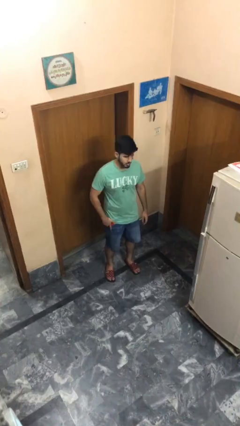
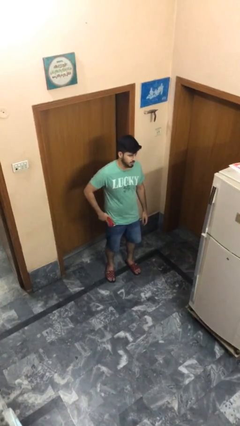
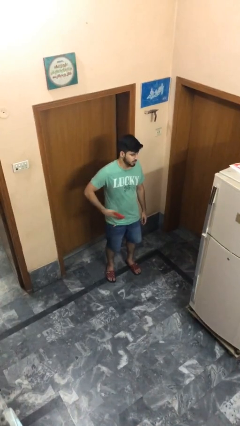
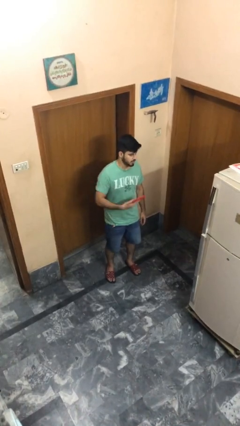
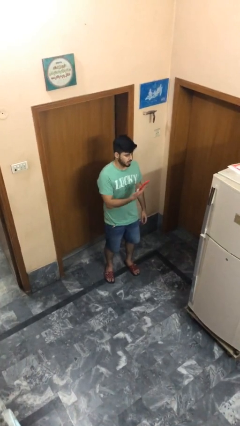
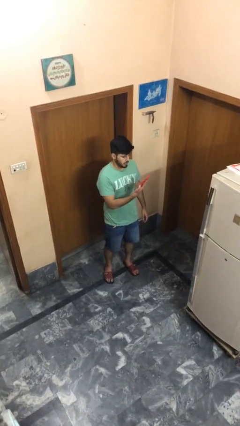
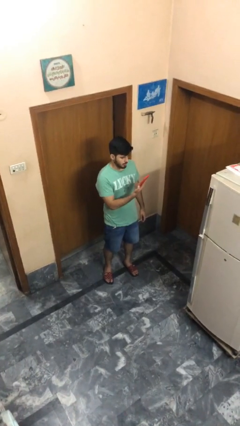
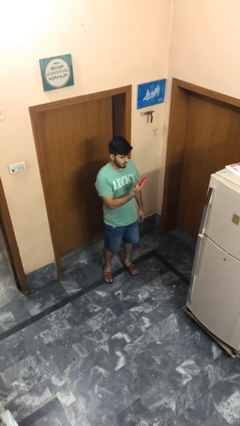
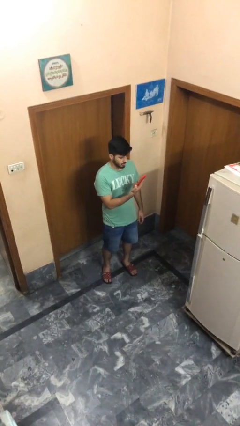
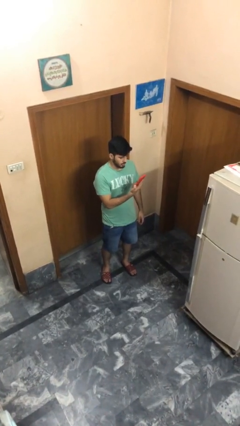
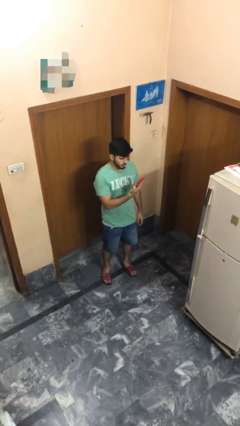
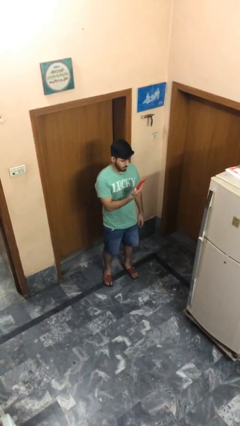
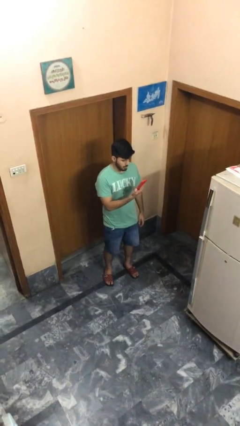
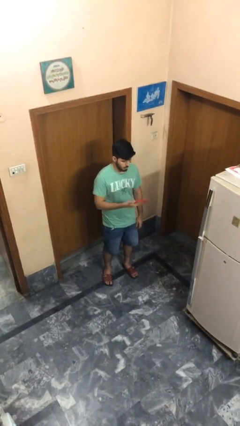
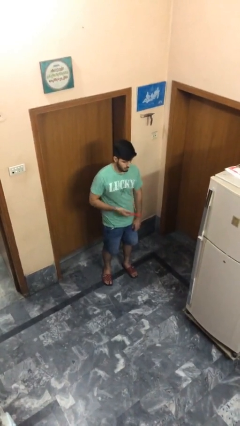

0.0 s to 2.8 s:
person takes phone from pocket

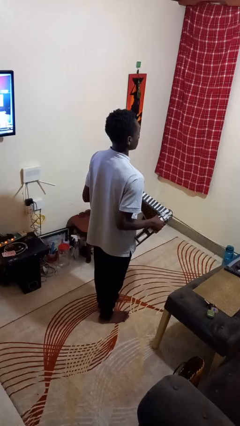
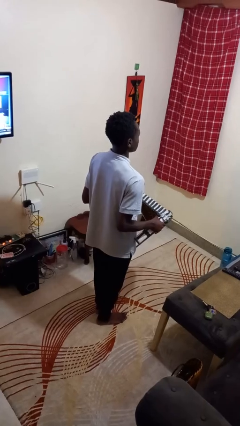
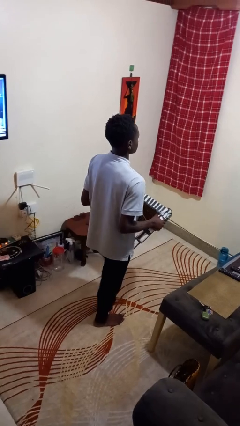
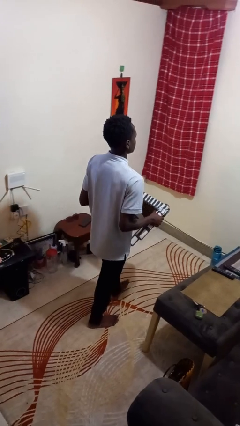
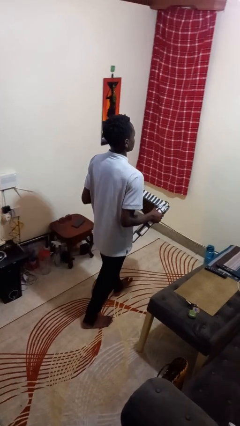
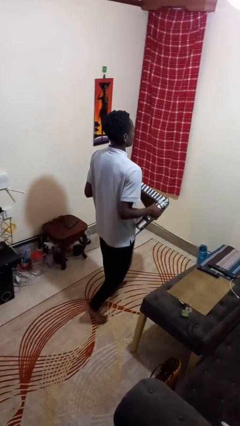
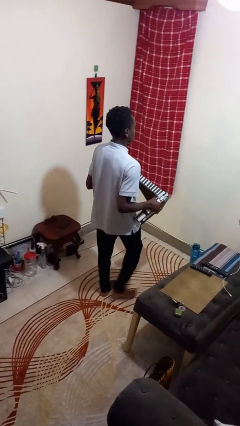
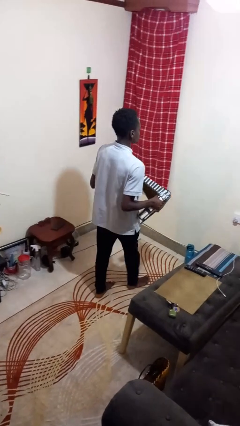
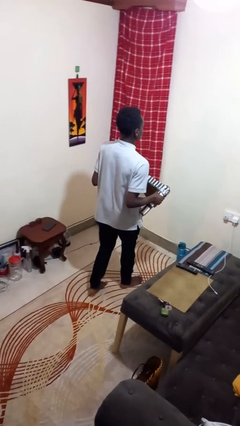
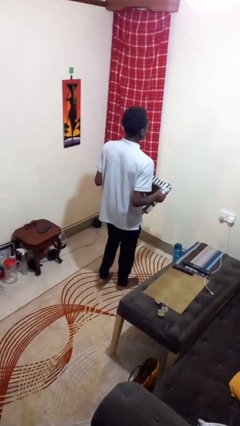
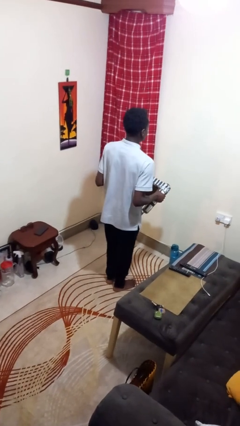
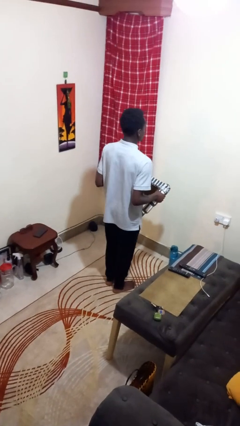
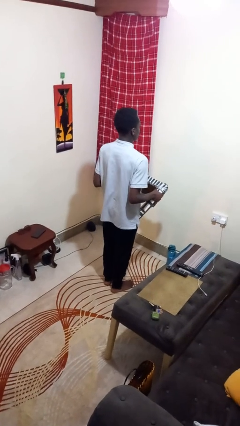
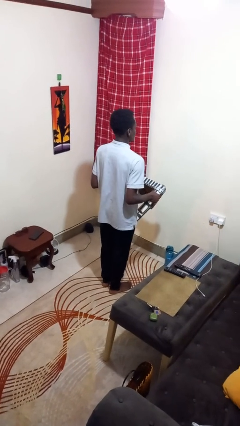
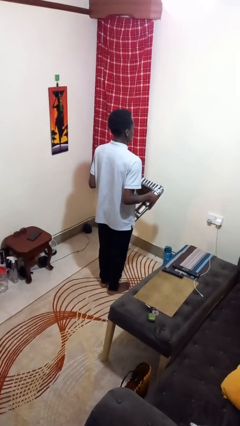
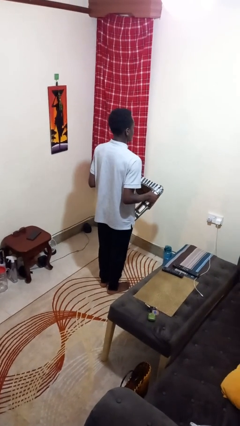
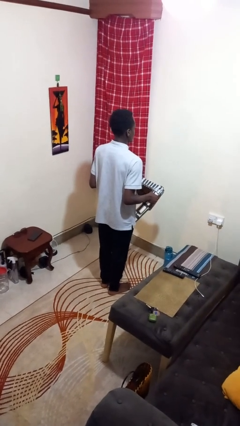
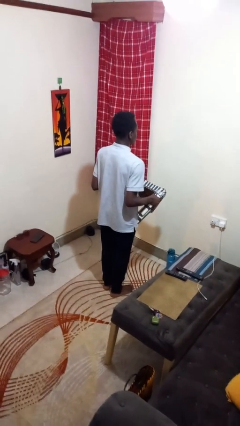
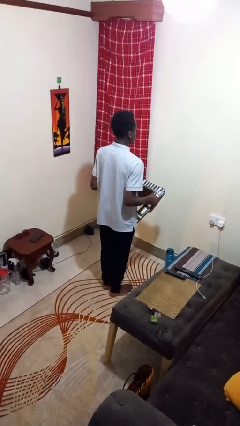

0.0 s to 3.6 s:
person carries furniture

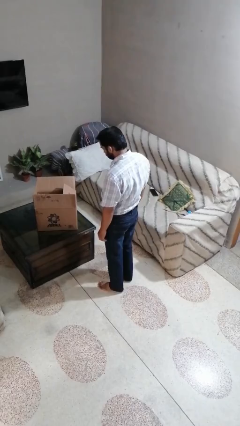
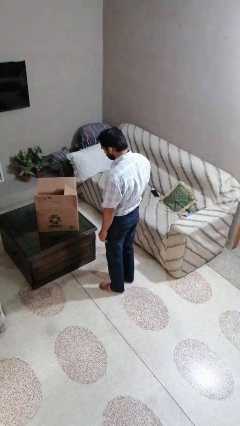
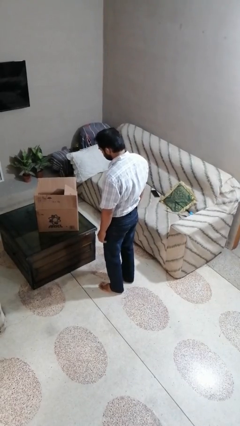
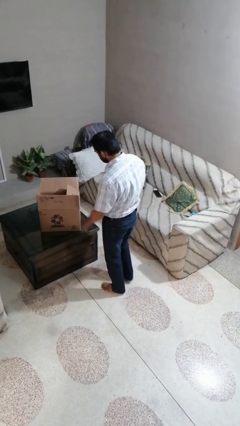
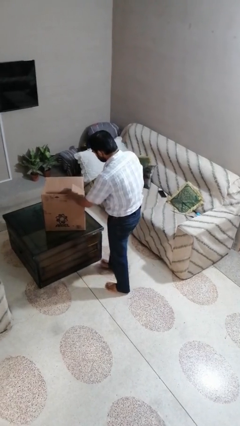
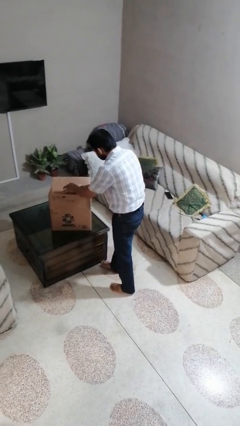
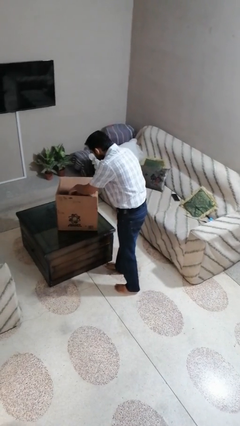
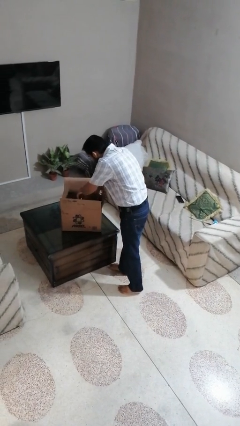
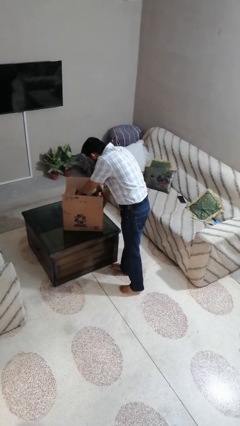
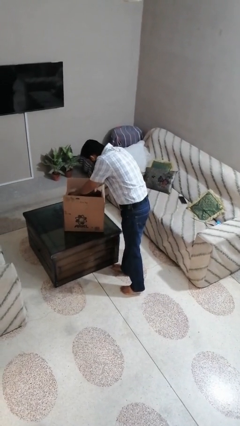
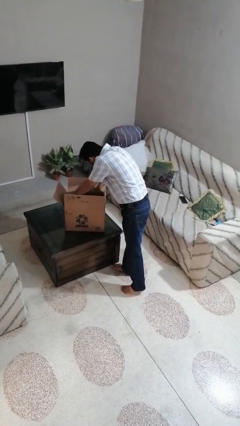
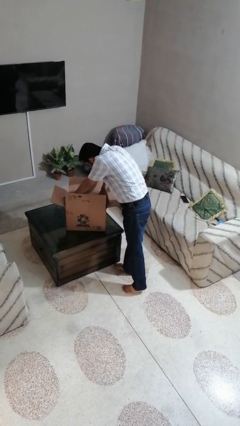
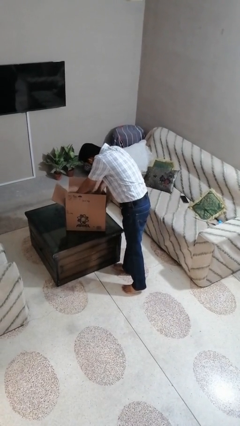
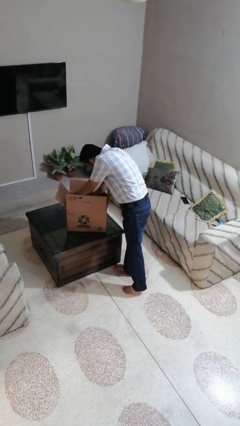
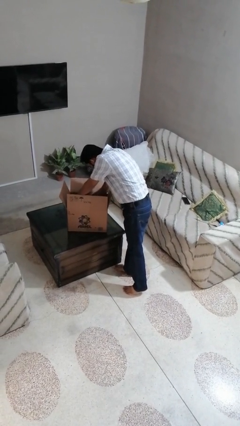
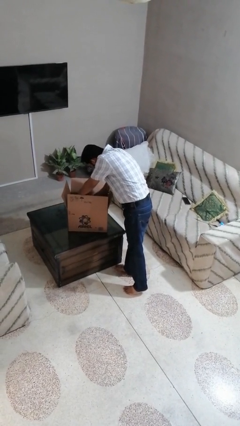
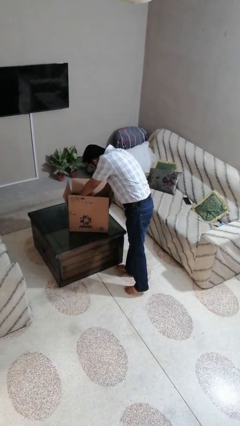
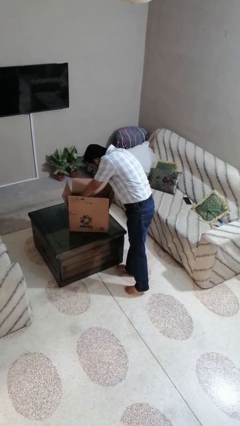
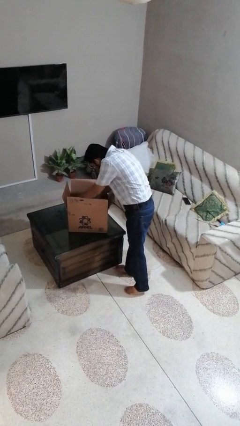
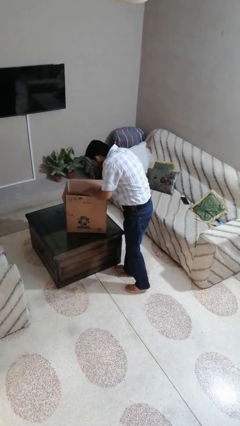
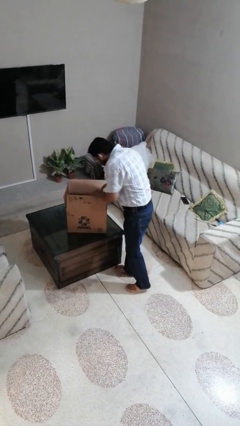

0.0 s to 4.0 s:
person searches in box

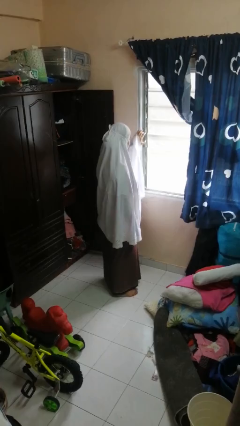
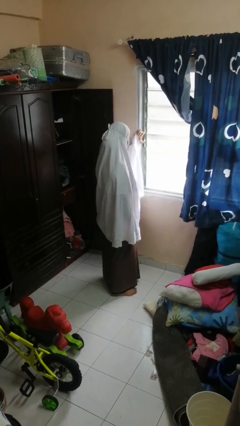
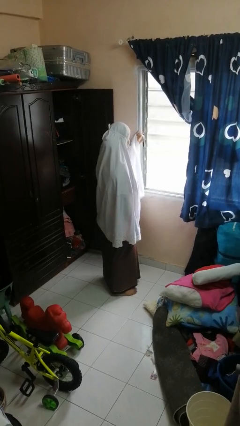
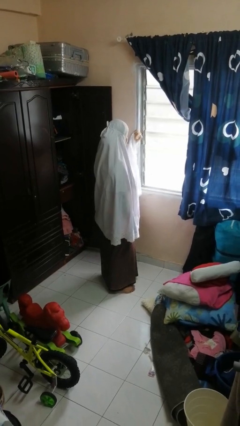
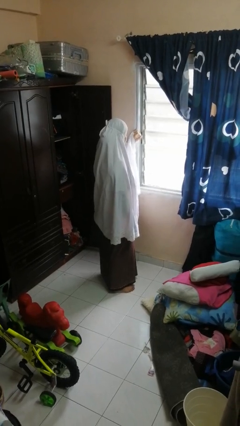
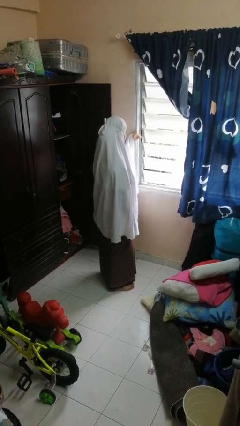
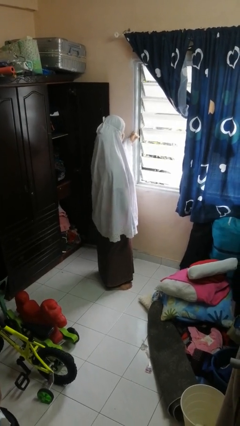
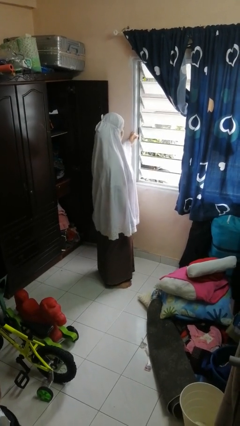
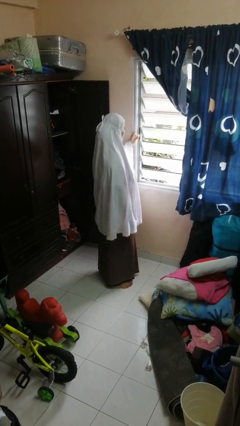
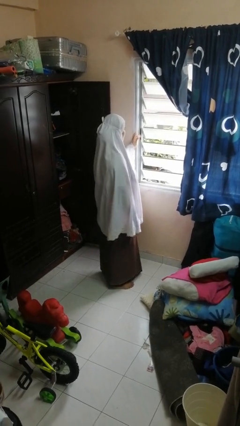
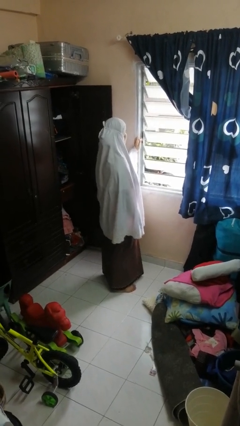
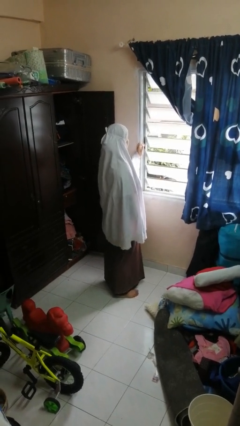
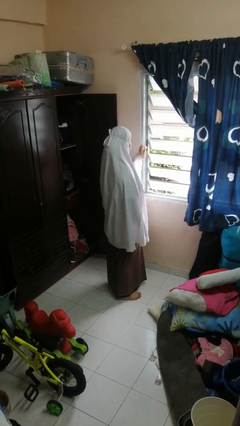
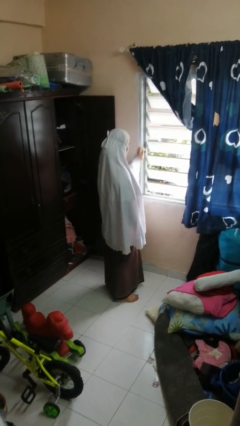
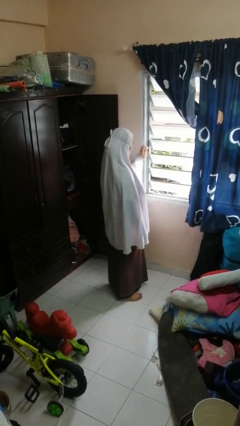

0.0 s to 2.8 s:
person opens home window

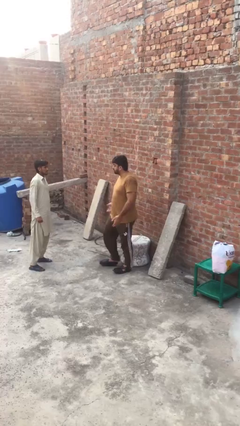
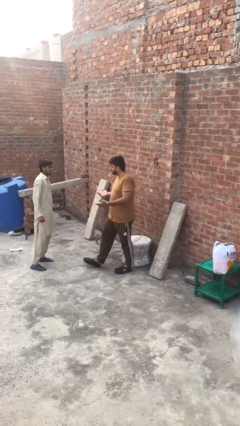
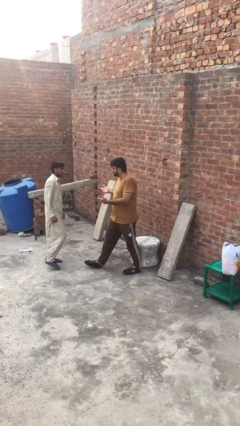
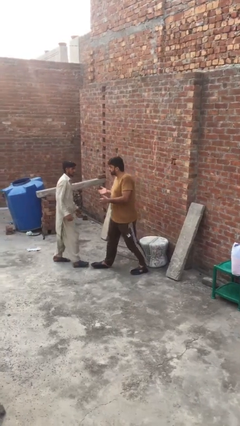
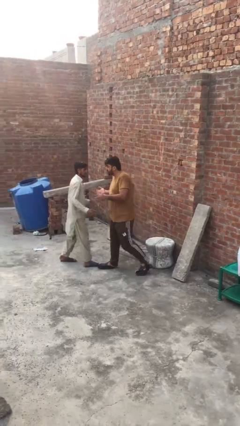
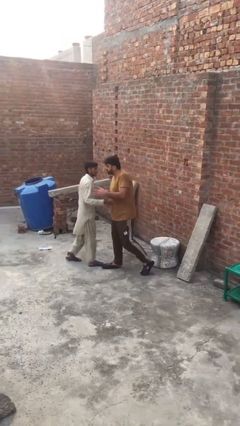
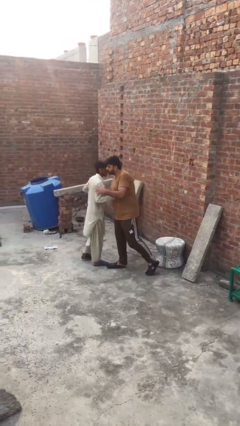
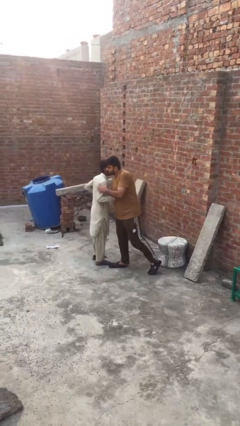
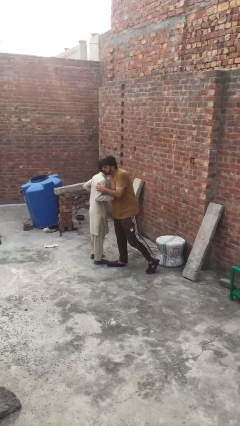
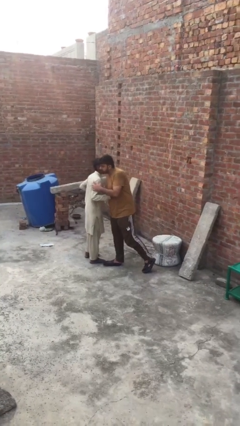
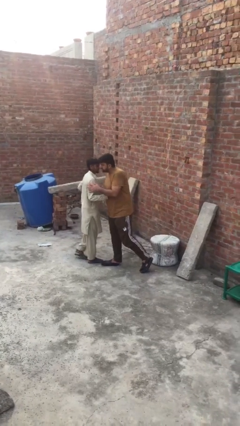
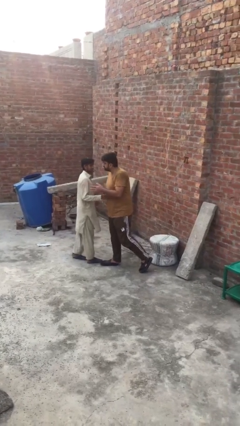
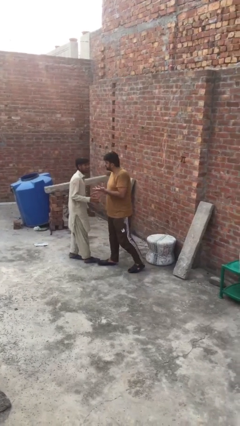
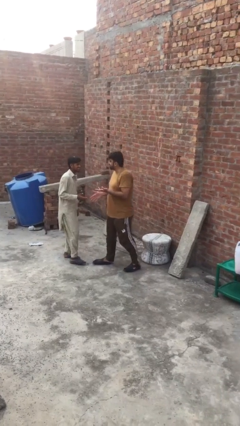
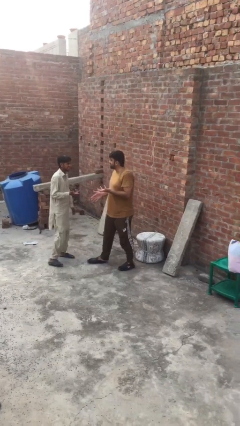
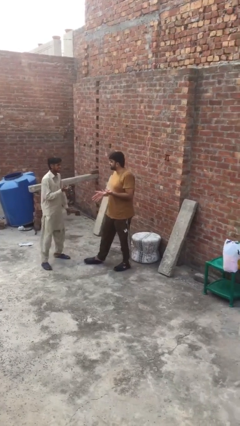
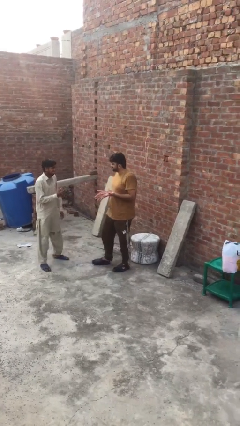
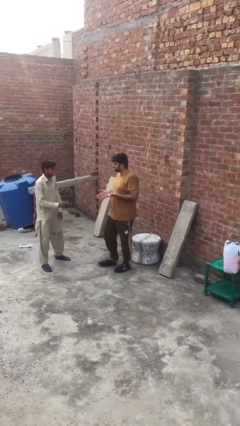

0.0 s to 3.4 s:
person embraces person

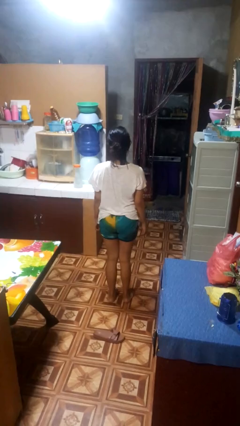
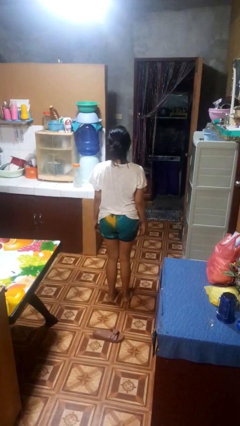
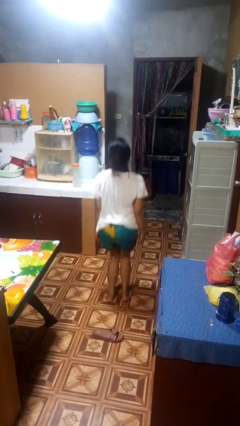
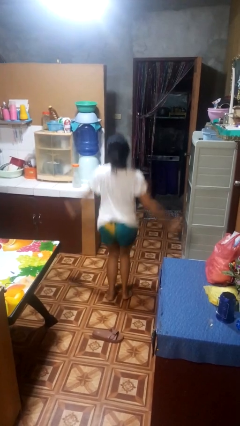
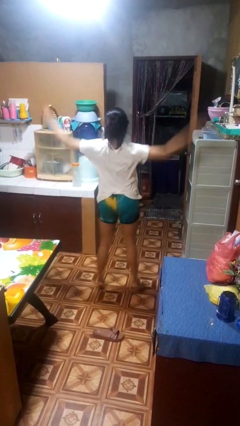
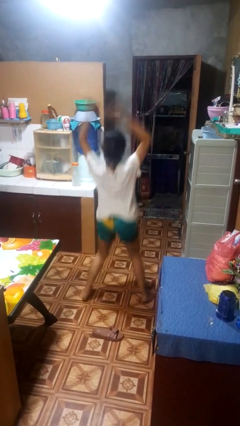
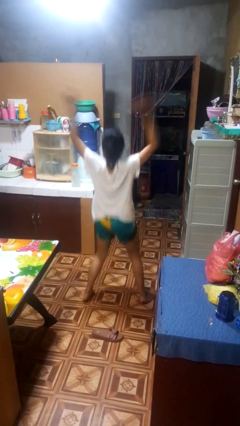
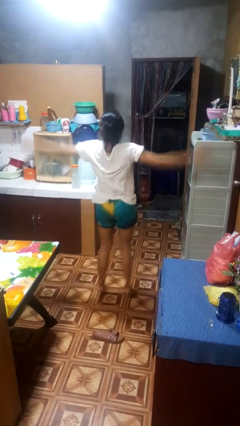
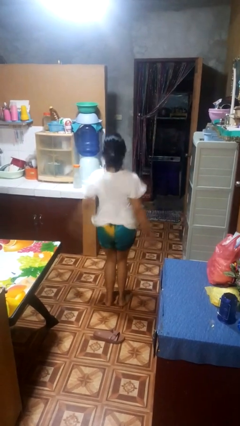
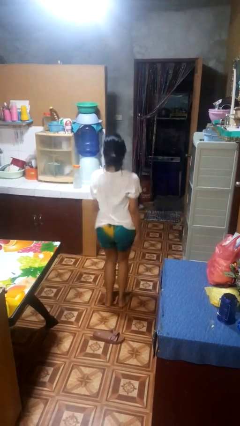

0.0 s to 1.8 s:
person exercises with jumping jacks
